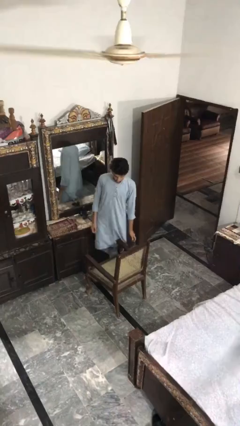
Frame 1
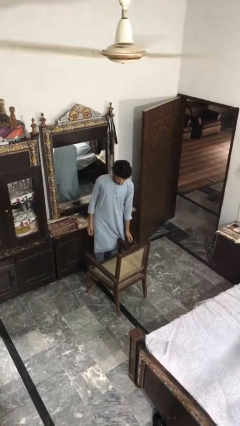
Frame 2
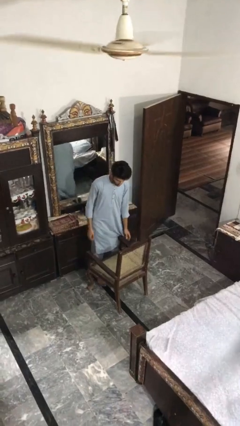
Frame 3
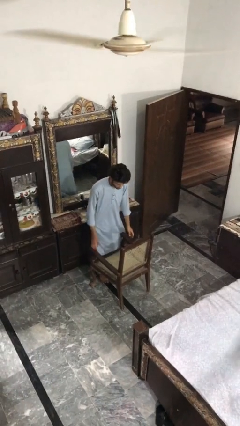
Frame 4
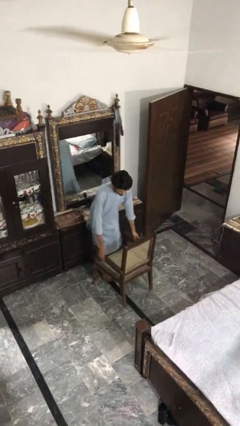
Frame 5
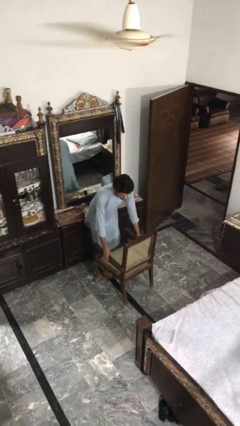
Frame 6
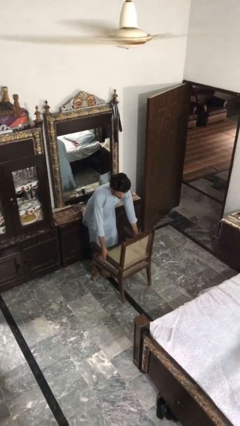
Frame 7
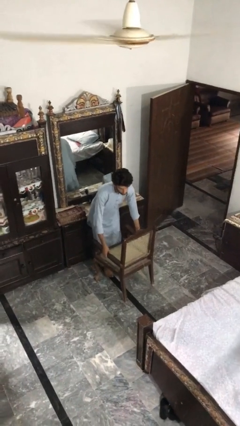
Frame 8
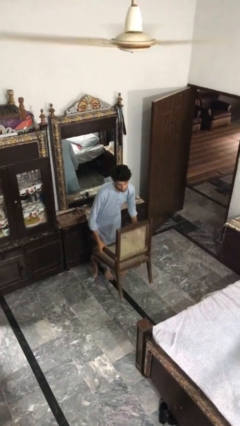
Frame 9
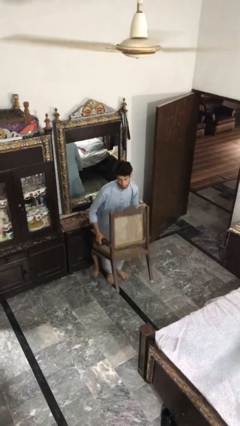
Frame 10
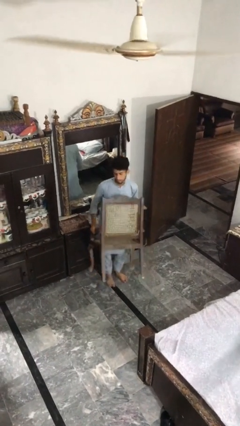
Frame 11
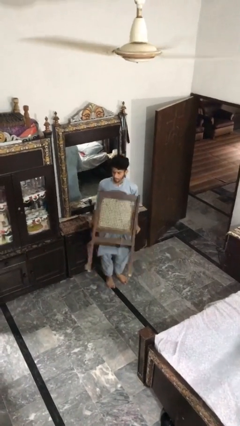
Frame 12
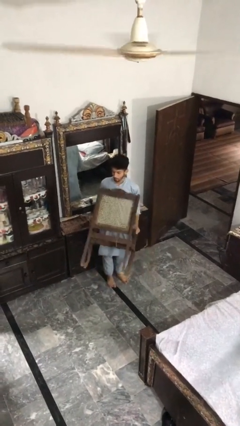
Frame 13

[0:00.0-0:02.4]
person picks up object from floor

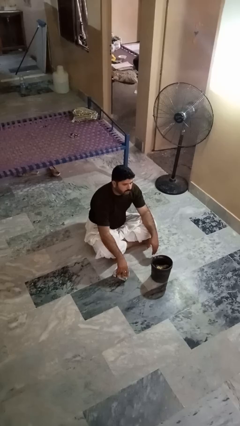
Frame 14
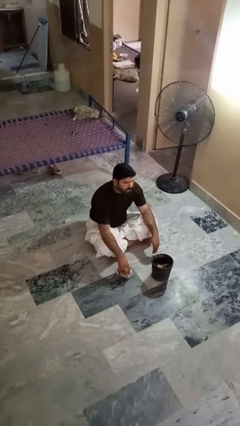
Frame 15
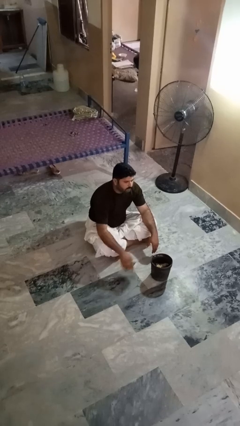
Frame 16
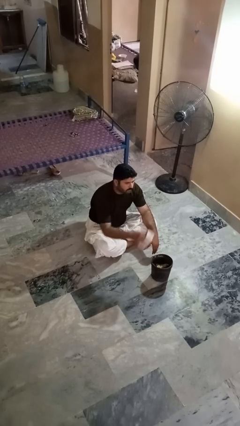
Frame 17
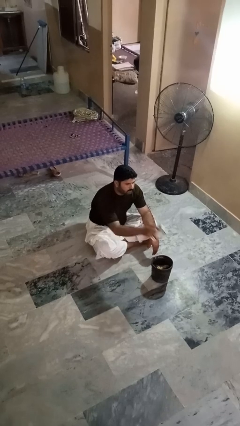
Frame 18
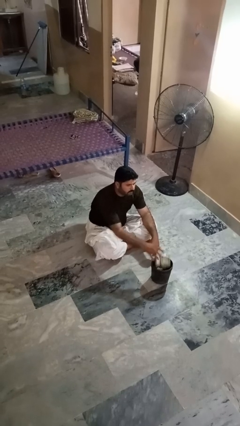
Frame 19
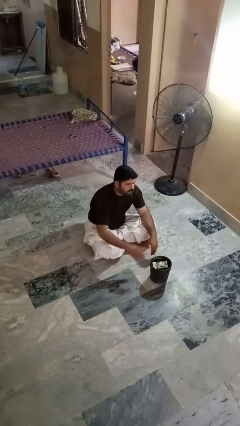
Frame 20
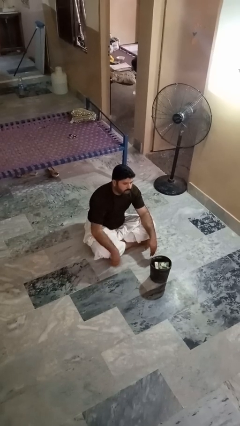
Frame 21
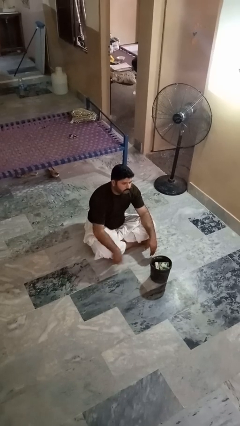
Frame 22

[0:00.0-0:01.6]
person puts object into basket

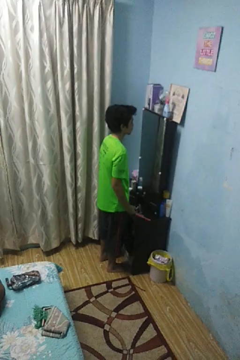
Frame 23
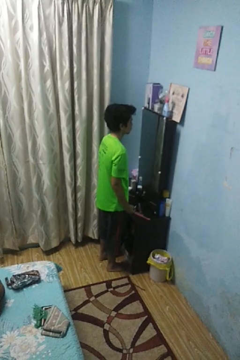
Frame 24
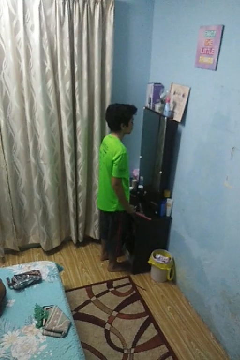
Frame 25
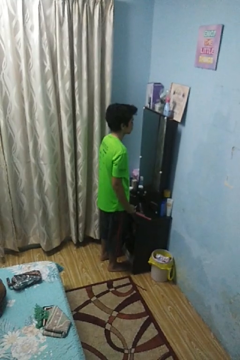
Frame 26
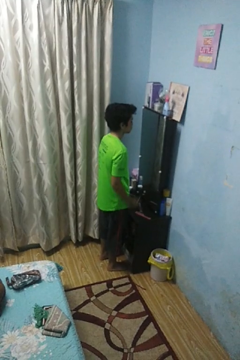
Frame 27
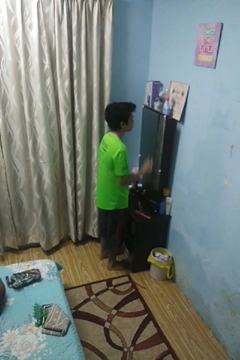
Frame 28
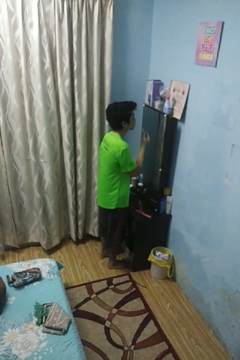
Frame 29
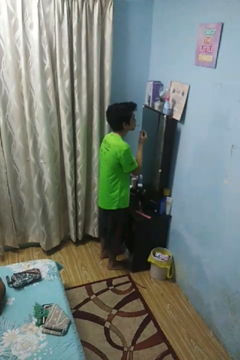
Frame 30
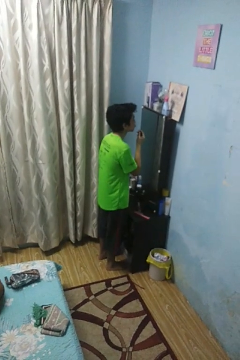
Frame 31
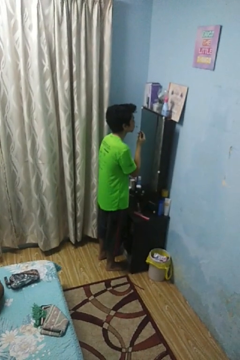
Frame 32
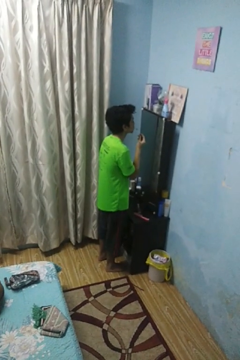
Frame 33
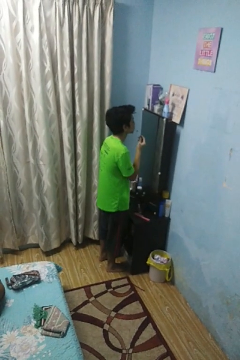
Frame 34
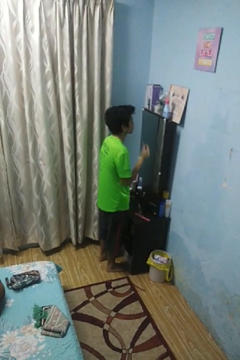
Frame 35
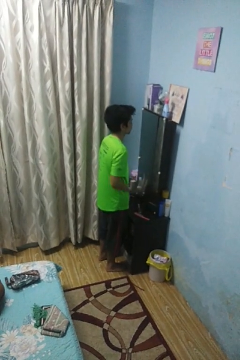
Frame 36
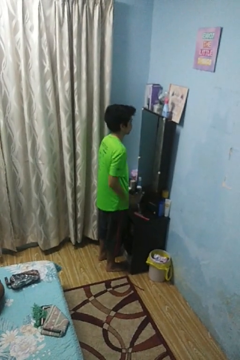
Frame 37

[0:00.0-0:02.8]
person applies lip makeup

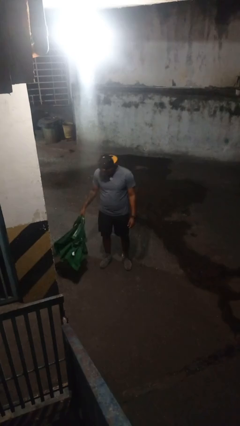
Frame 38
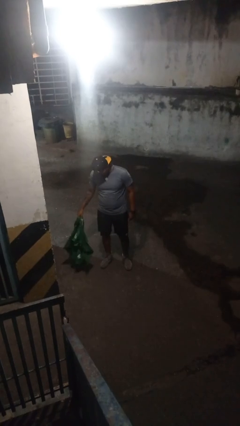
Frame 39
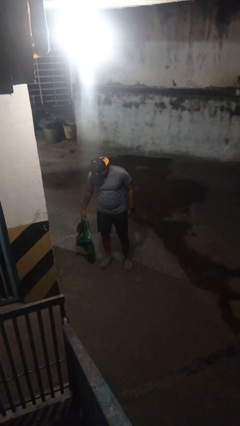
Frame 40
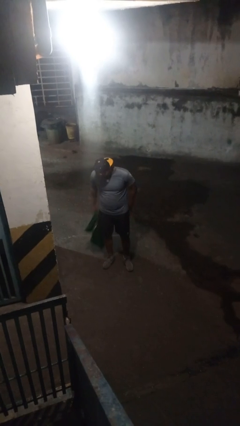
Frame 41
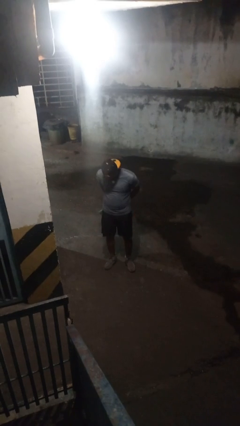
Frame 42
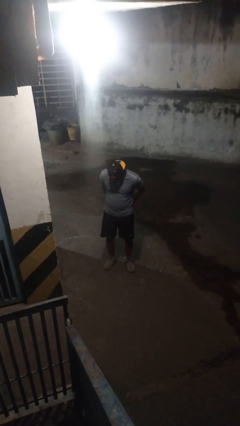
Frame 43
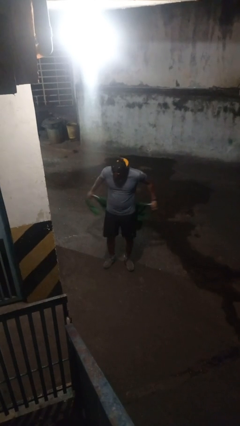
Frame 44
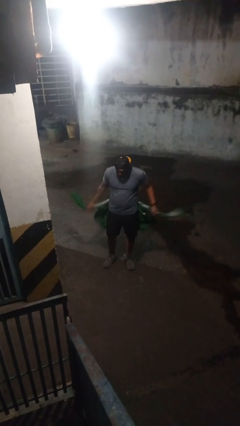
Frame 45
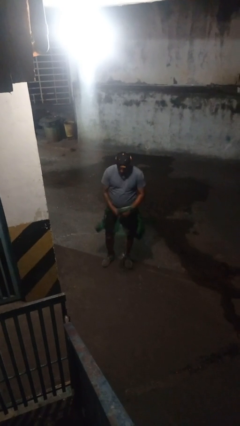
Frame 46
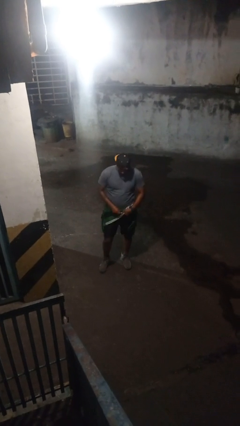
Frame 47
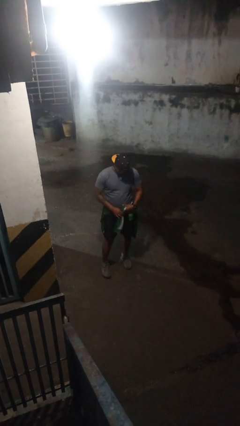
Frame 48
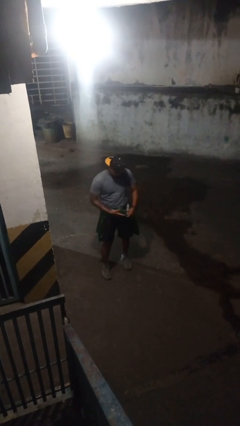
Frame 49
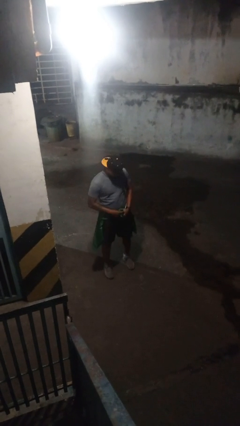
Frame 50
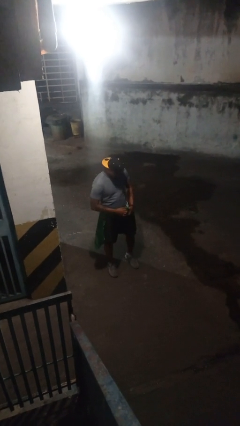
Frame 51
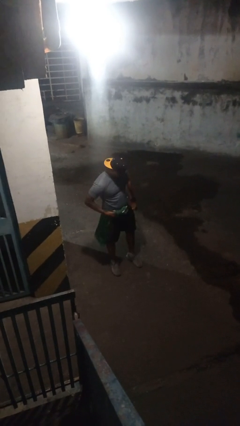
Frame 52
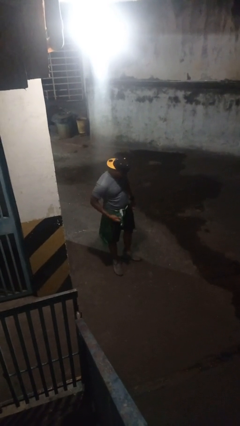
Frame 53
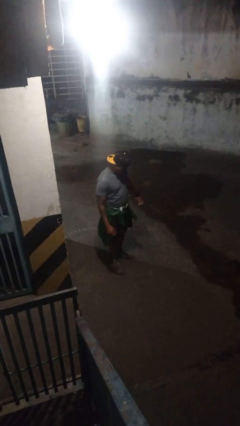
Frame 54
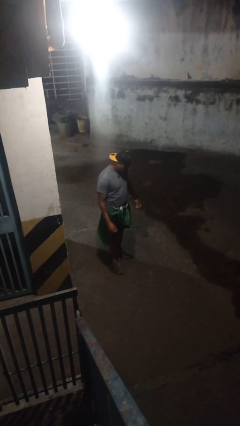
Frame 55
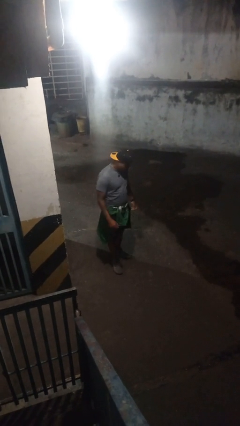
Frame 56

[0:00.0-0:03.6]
person ties jacket around waist

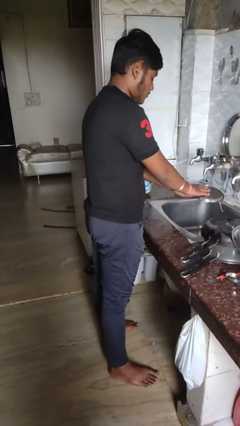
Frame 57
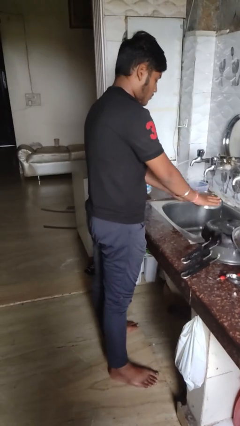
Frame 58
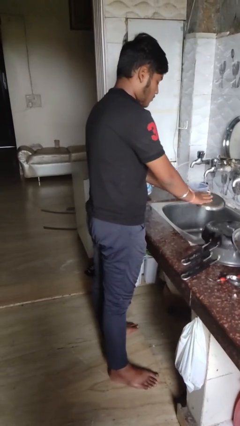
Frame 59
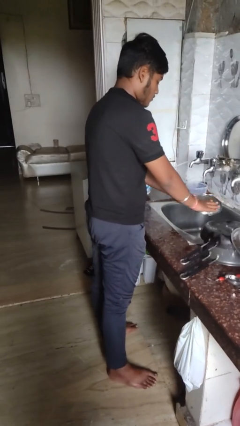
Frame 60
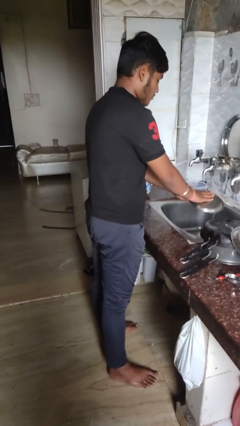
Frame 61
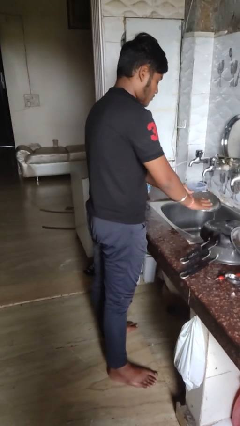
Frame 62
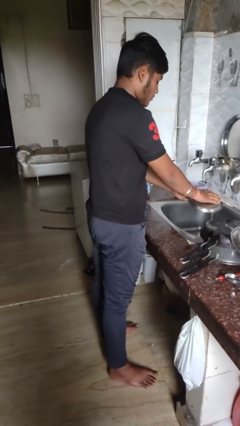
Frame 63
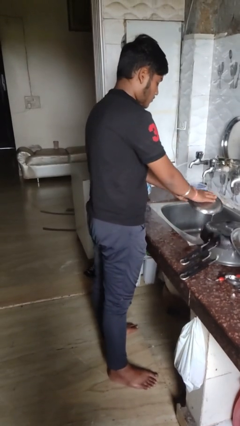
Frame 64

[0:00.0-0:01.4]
person washes dish

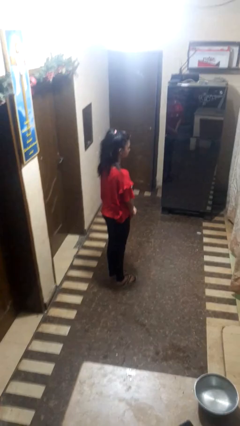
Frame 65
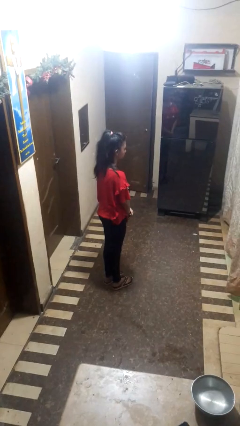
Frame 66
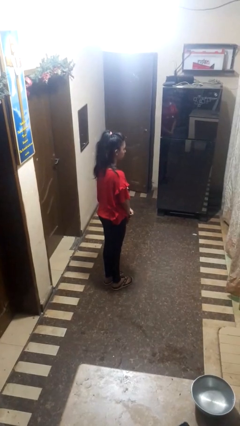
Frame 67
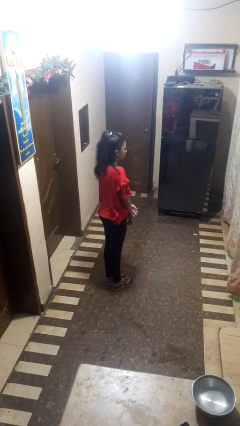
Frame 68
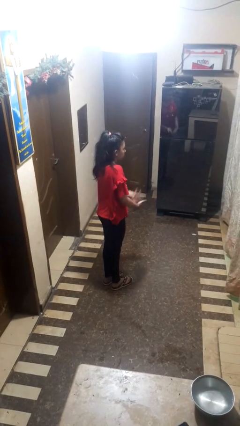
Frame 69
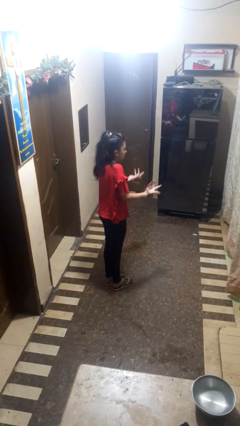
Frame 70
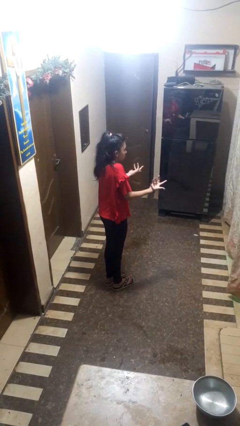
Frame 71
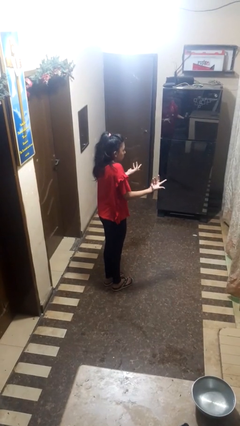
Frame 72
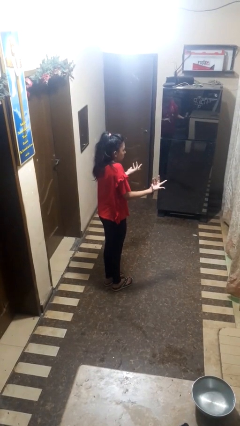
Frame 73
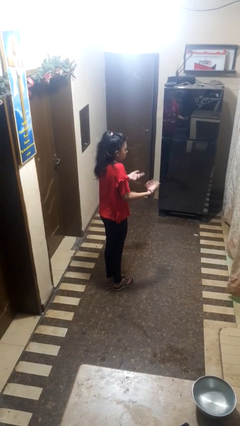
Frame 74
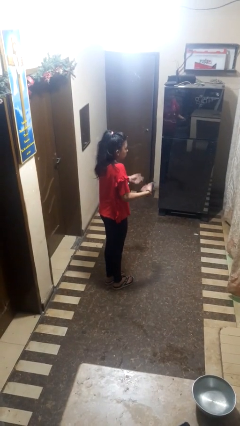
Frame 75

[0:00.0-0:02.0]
person shrugs

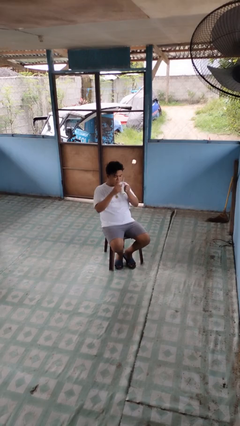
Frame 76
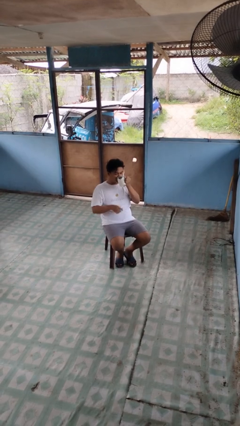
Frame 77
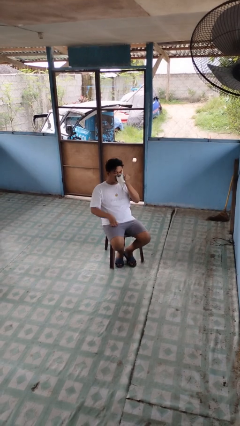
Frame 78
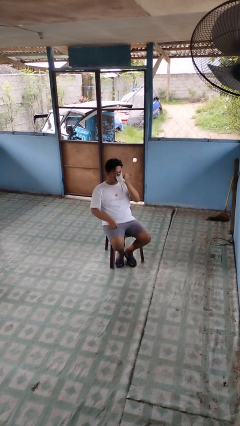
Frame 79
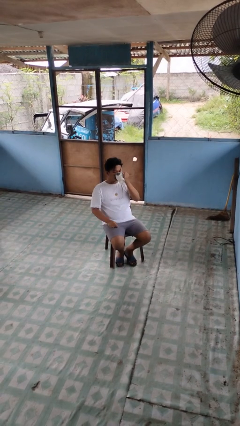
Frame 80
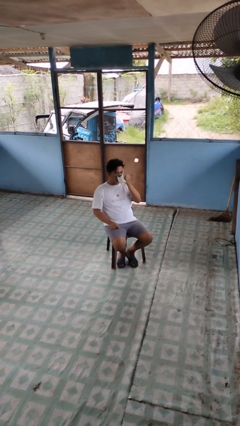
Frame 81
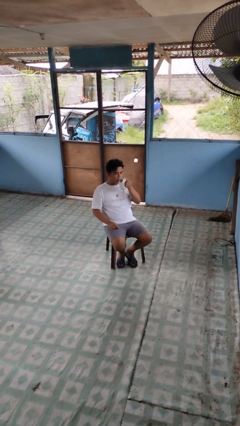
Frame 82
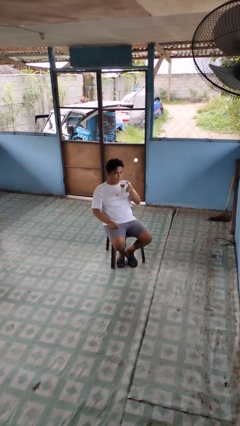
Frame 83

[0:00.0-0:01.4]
person drinks from mug

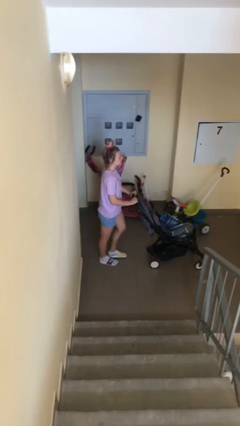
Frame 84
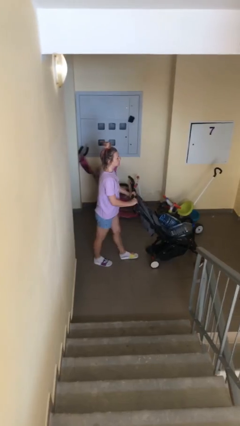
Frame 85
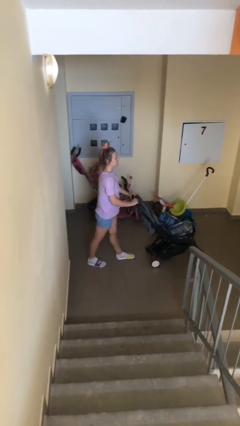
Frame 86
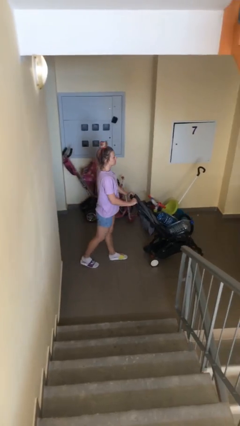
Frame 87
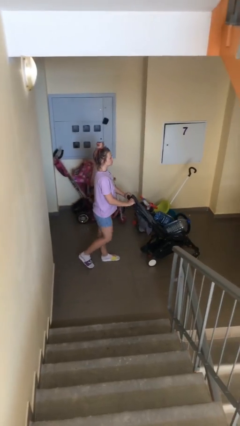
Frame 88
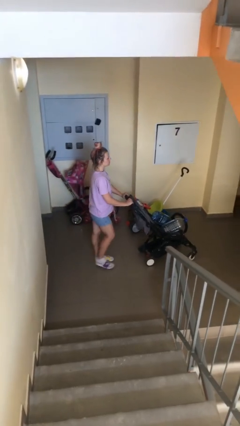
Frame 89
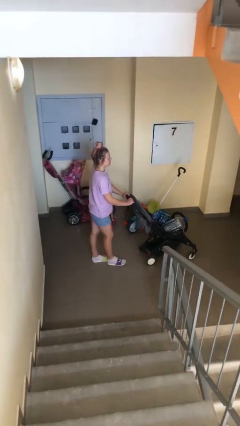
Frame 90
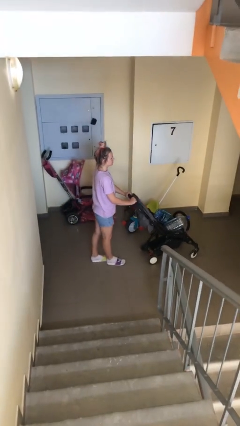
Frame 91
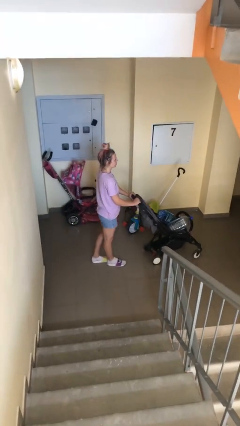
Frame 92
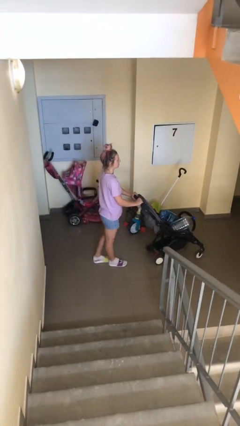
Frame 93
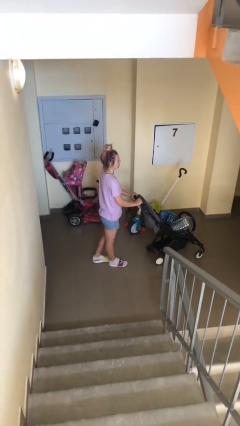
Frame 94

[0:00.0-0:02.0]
person pushes wheeled cart

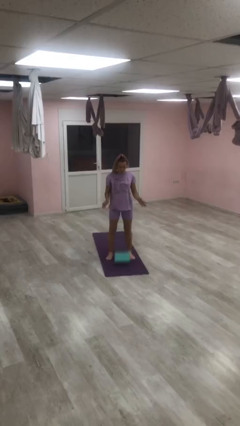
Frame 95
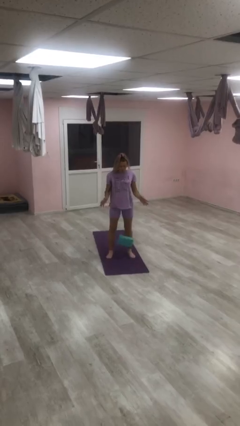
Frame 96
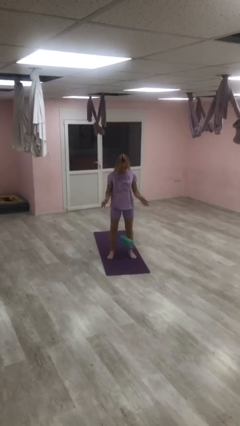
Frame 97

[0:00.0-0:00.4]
person drops object
